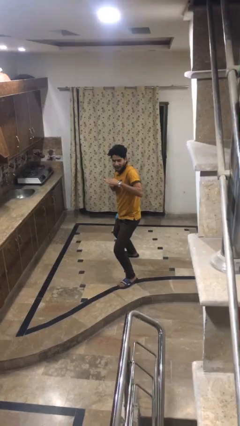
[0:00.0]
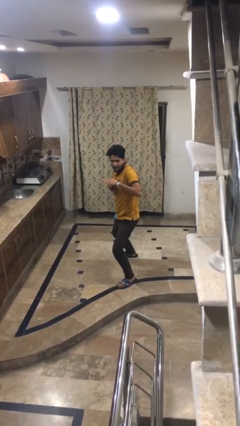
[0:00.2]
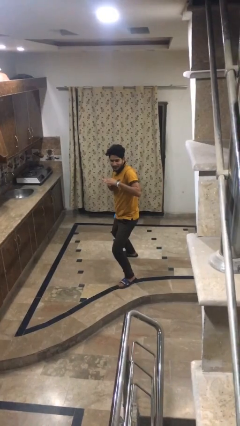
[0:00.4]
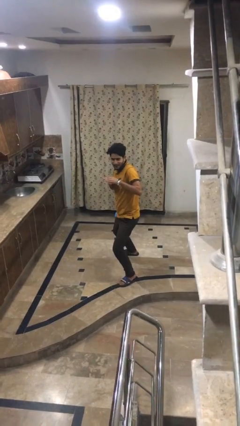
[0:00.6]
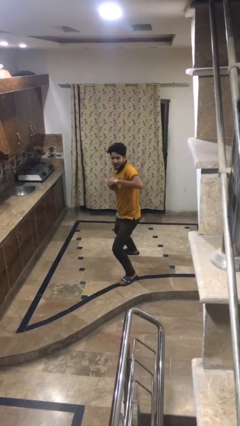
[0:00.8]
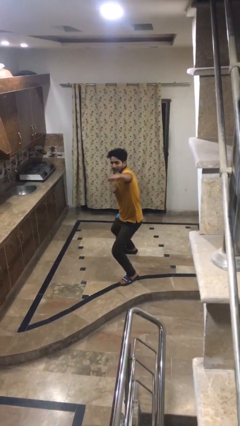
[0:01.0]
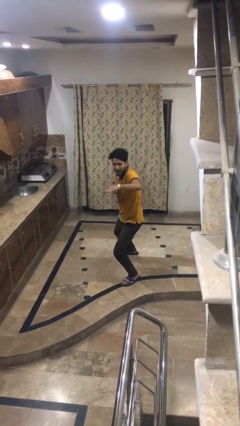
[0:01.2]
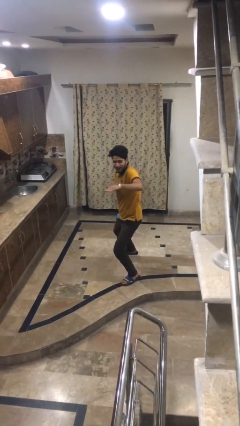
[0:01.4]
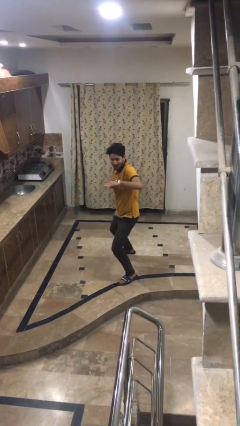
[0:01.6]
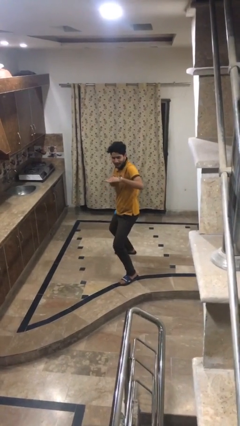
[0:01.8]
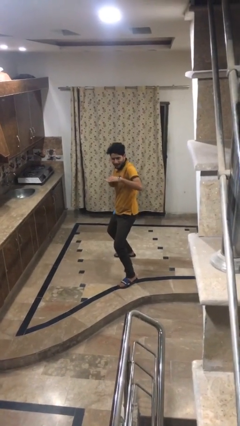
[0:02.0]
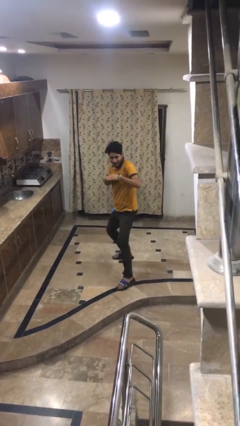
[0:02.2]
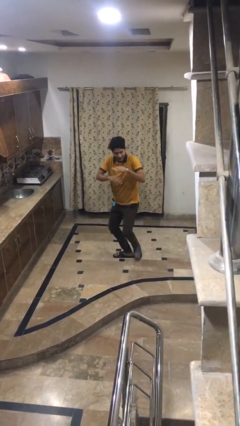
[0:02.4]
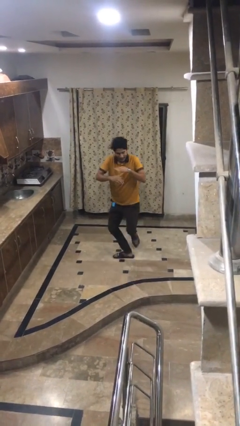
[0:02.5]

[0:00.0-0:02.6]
person karate chop

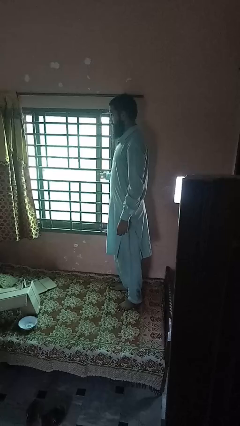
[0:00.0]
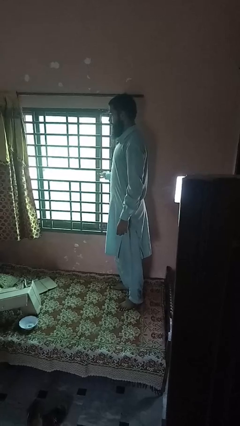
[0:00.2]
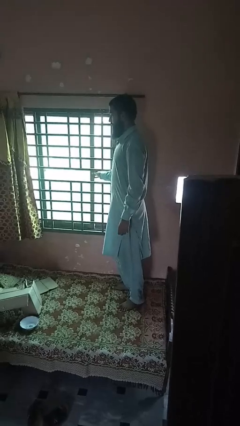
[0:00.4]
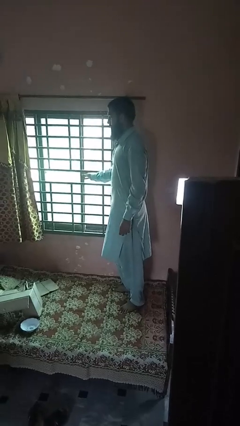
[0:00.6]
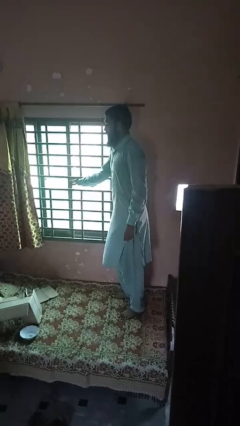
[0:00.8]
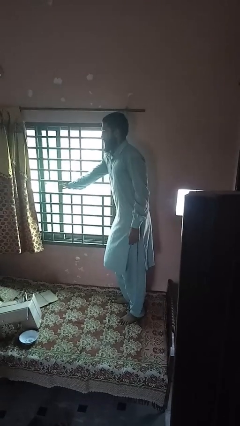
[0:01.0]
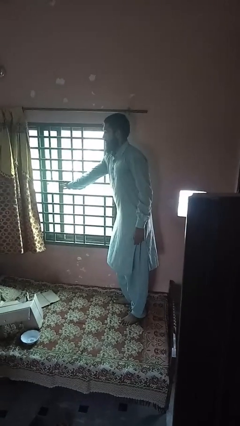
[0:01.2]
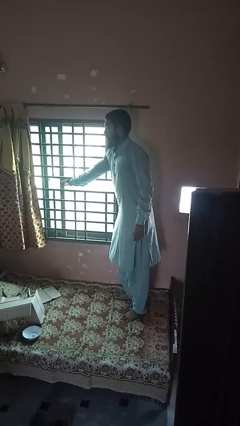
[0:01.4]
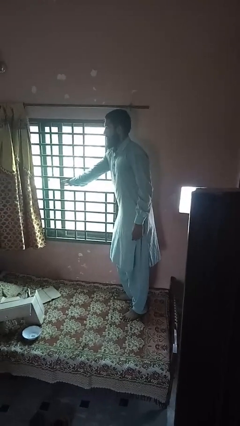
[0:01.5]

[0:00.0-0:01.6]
person opens home window

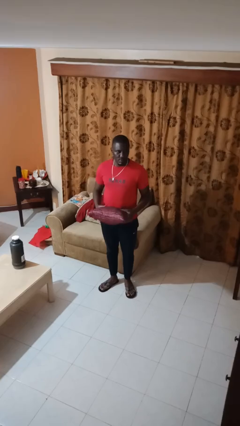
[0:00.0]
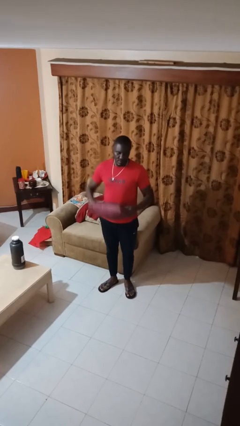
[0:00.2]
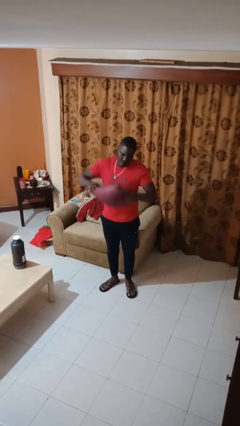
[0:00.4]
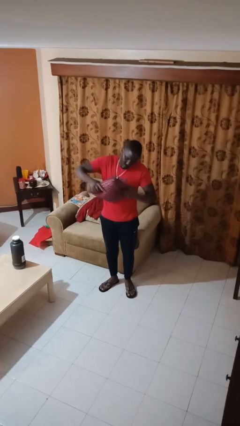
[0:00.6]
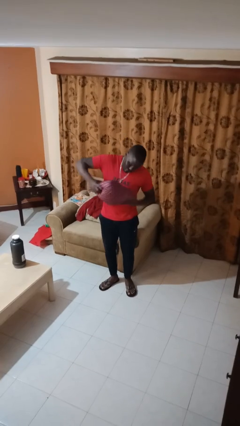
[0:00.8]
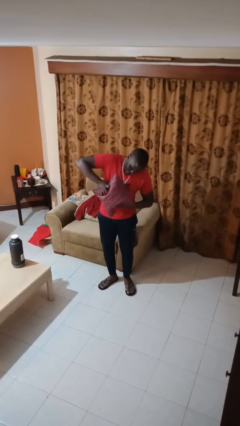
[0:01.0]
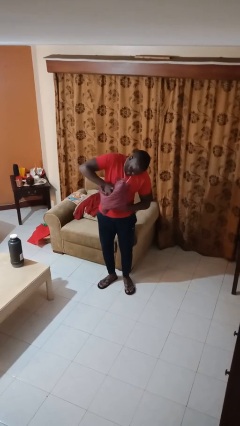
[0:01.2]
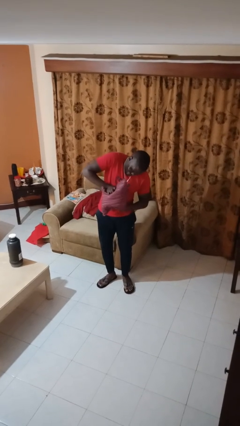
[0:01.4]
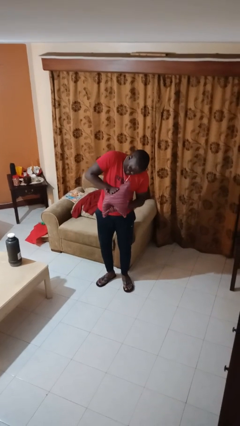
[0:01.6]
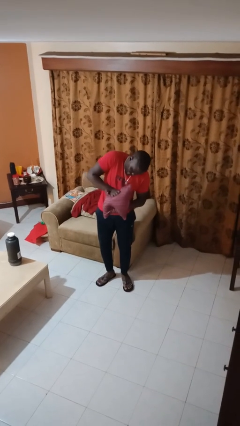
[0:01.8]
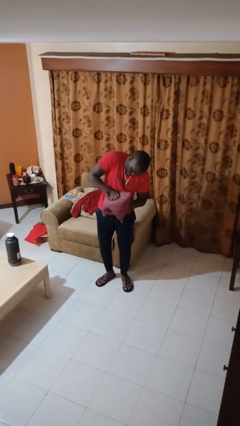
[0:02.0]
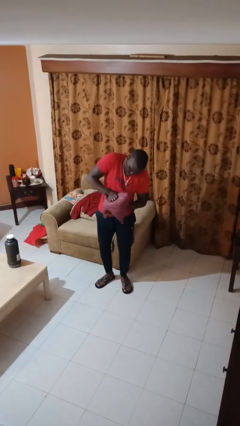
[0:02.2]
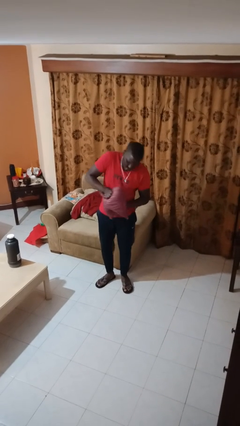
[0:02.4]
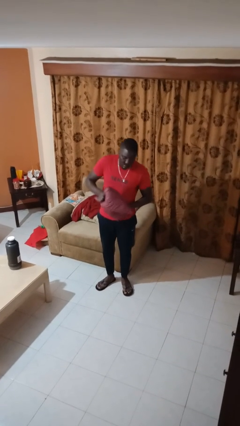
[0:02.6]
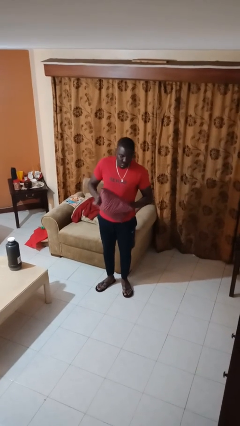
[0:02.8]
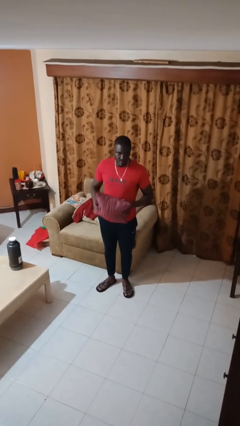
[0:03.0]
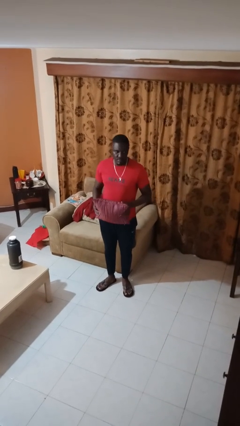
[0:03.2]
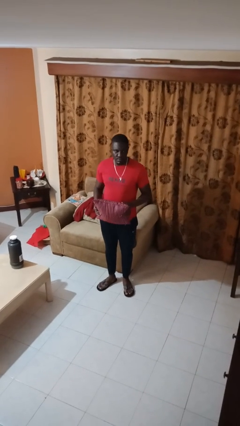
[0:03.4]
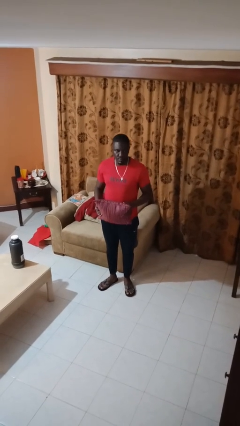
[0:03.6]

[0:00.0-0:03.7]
person squeezes object

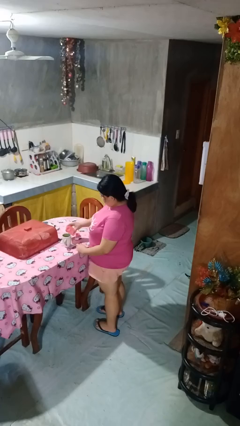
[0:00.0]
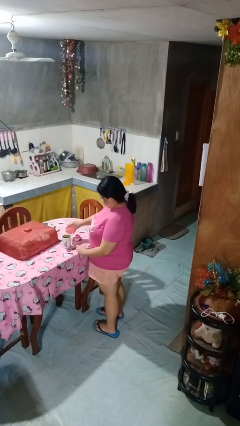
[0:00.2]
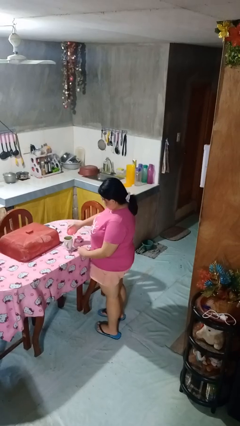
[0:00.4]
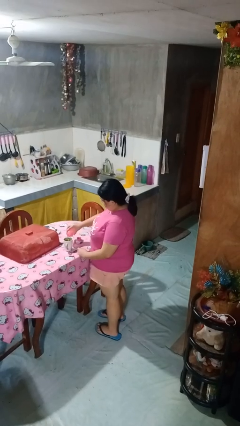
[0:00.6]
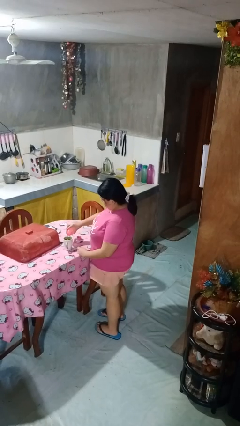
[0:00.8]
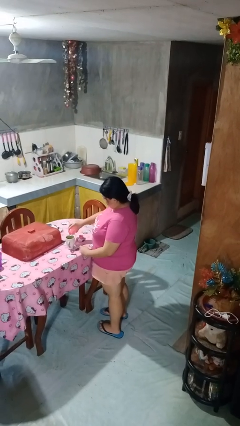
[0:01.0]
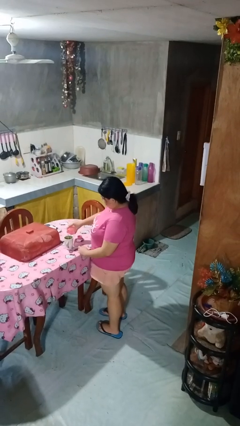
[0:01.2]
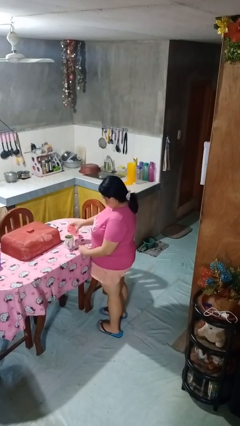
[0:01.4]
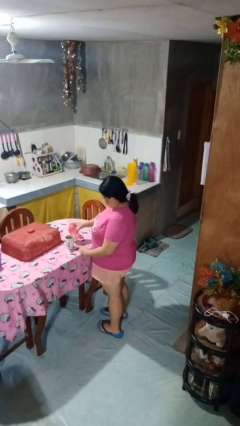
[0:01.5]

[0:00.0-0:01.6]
person pours liquid into cup

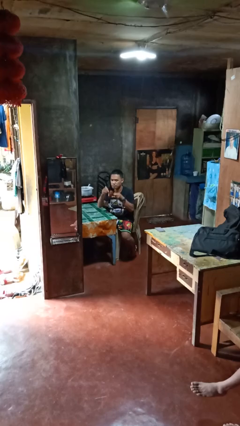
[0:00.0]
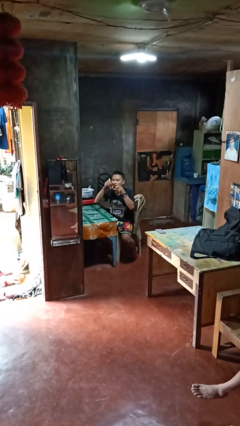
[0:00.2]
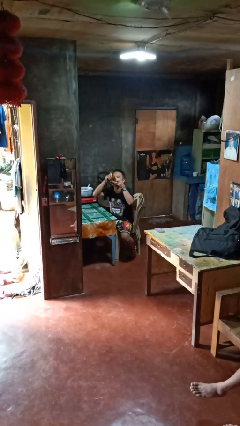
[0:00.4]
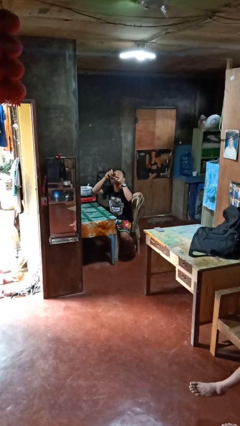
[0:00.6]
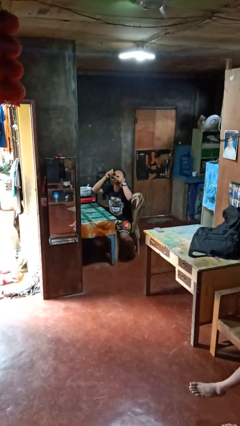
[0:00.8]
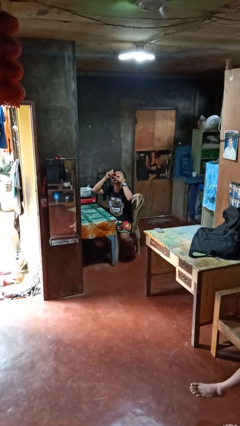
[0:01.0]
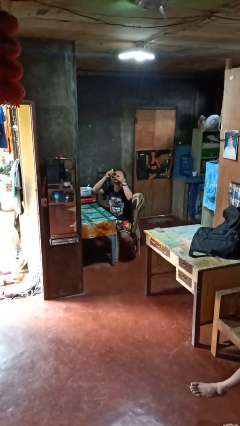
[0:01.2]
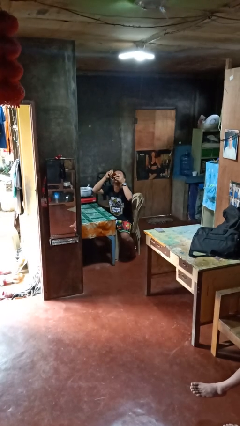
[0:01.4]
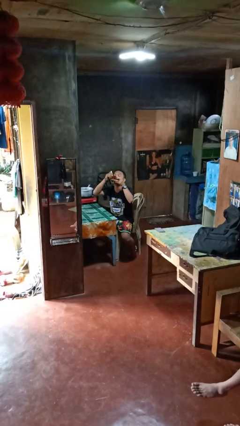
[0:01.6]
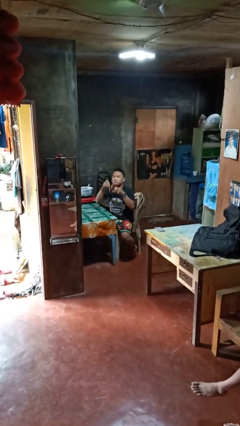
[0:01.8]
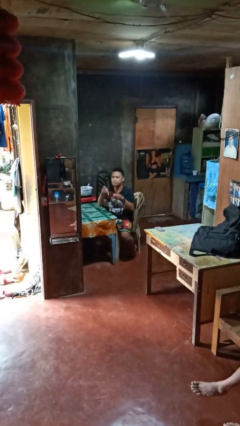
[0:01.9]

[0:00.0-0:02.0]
person drinks from mug

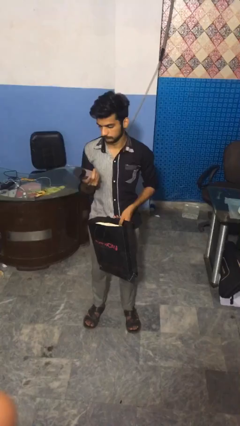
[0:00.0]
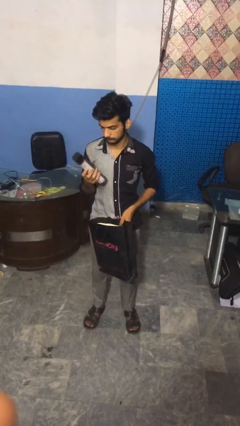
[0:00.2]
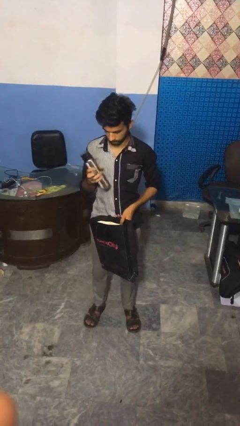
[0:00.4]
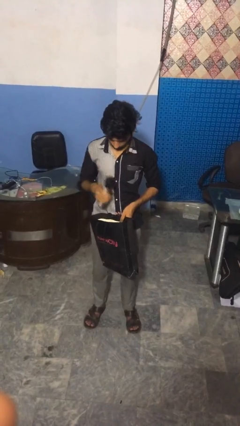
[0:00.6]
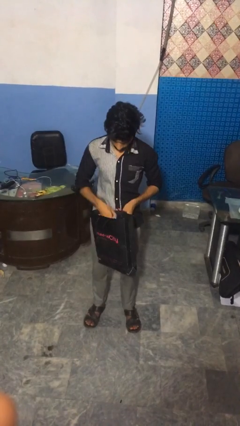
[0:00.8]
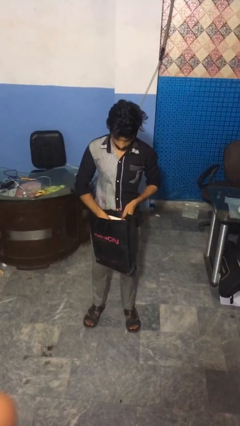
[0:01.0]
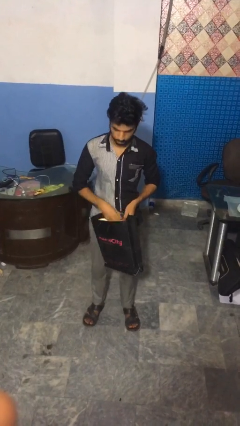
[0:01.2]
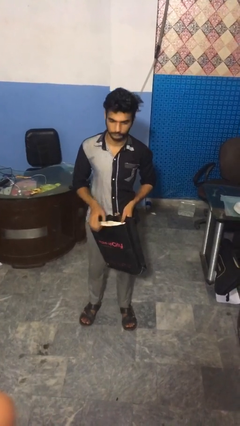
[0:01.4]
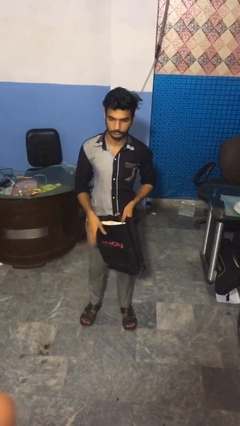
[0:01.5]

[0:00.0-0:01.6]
person puts object into bag

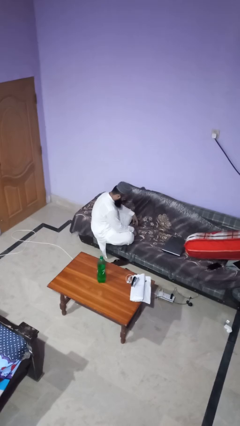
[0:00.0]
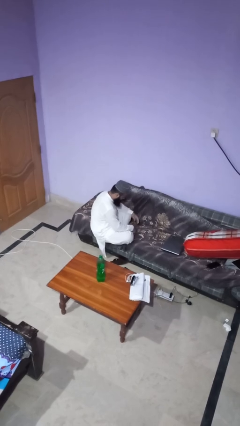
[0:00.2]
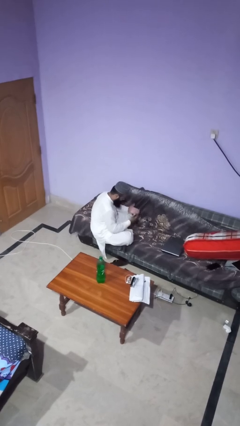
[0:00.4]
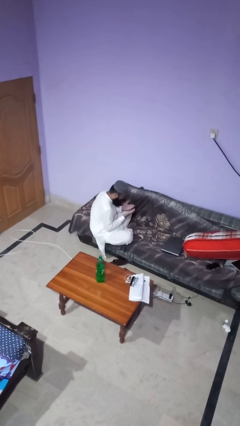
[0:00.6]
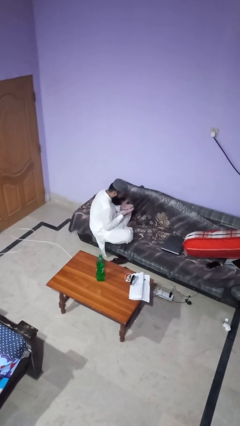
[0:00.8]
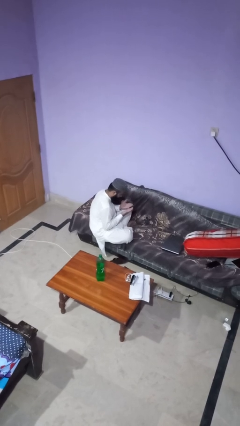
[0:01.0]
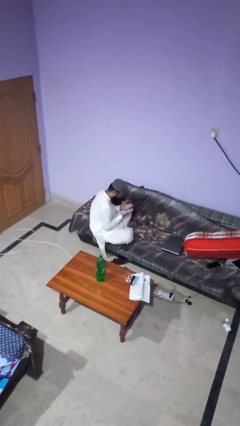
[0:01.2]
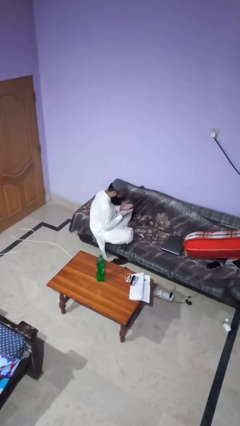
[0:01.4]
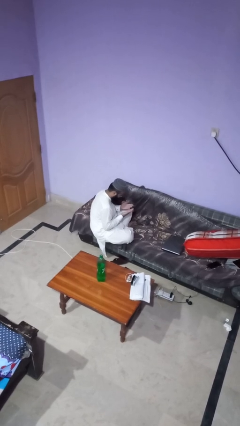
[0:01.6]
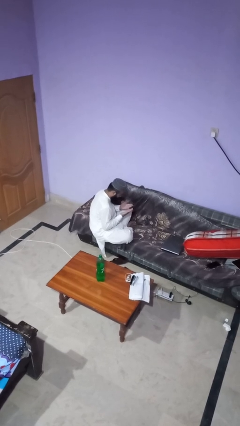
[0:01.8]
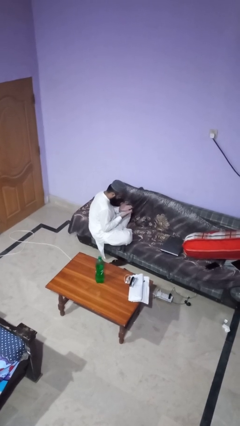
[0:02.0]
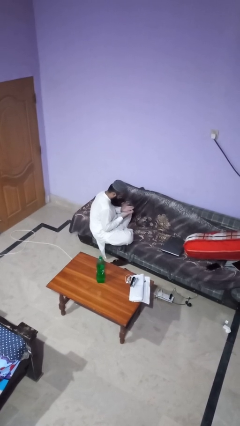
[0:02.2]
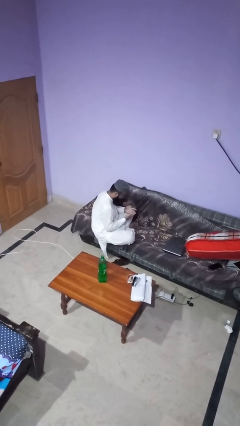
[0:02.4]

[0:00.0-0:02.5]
person looks at hands in lap

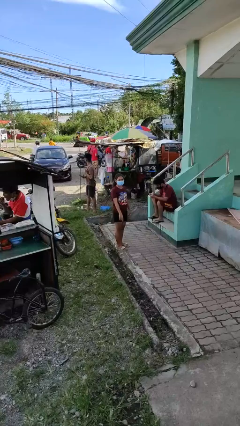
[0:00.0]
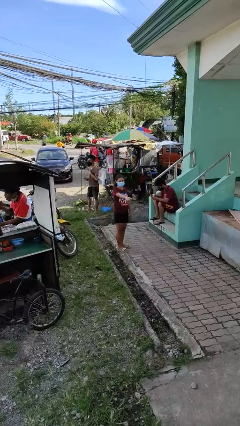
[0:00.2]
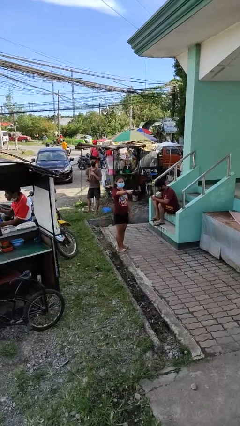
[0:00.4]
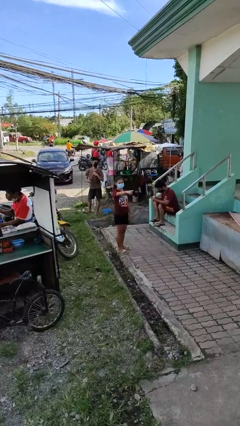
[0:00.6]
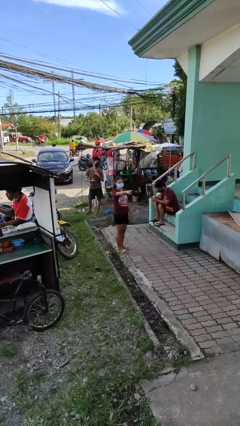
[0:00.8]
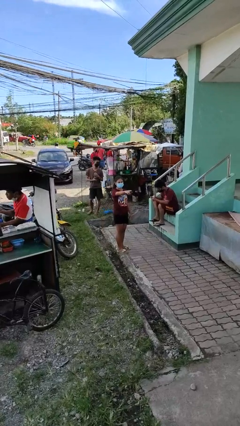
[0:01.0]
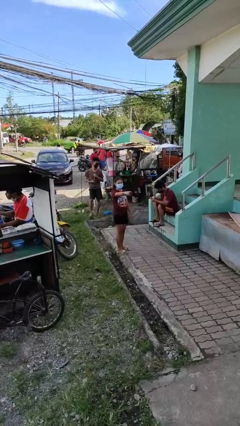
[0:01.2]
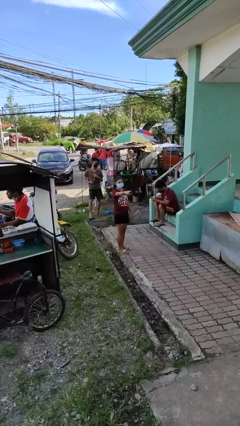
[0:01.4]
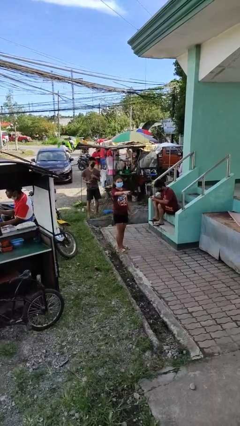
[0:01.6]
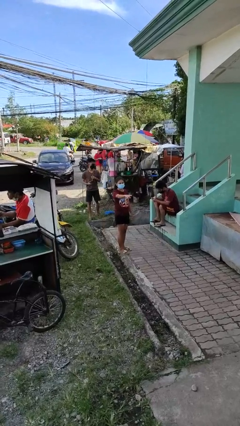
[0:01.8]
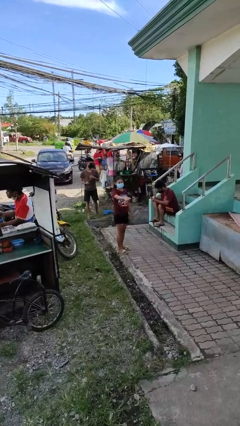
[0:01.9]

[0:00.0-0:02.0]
person points at person
